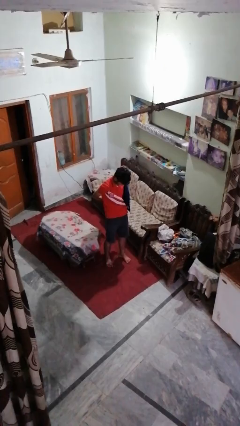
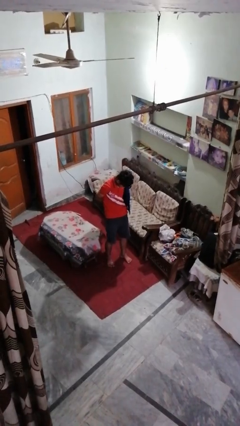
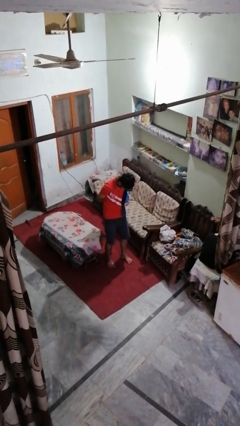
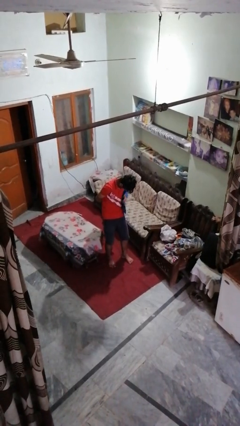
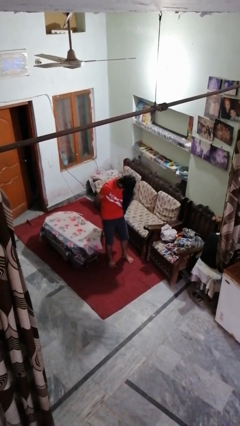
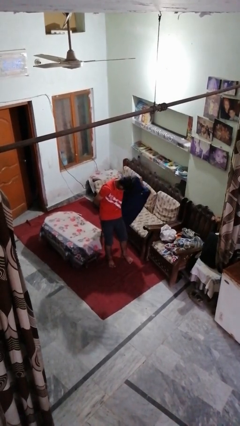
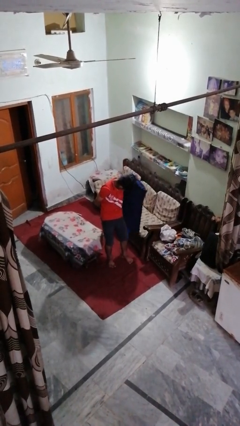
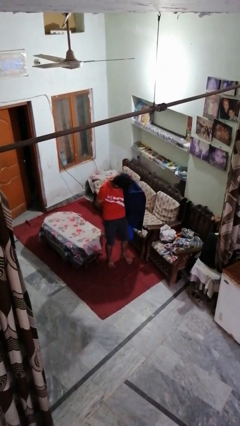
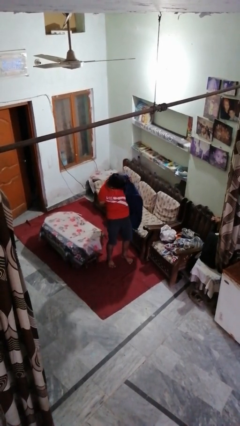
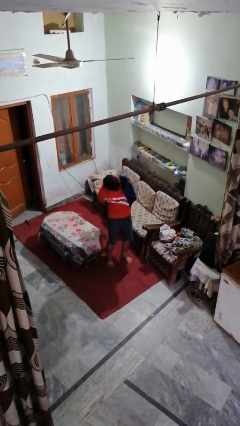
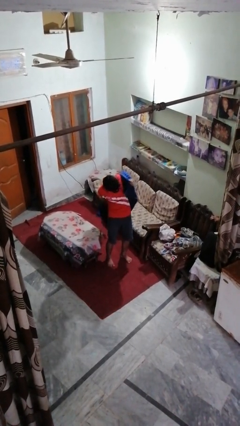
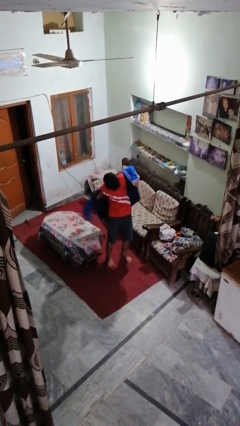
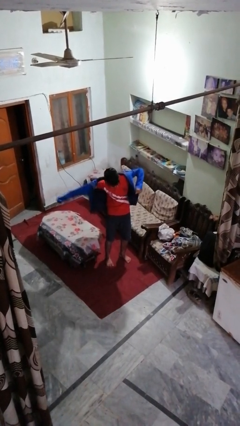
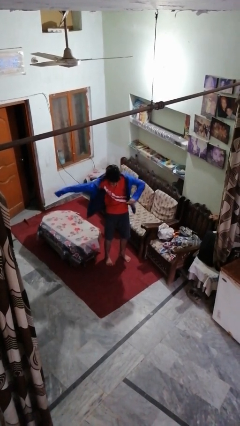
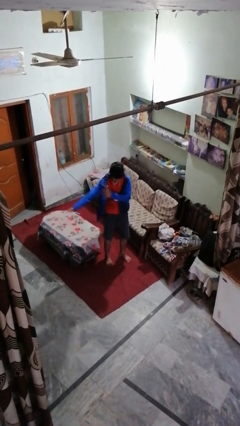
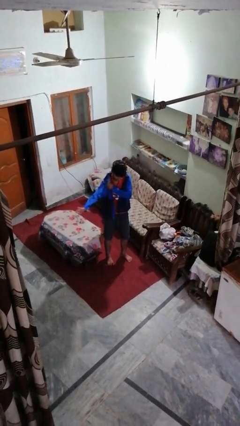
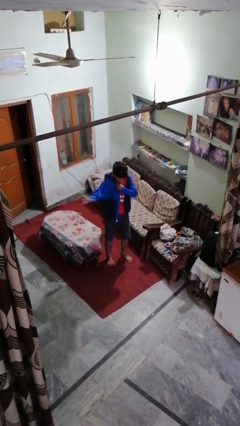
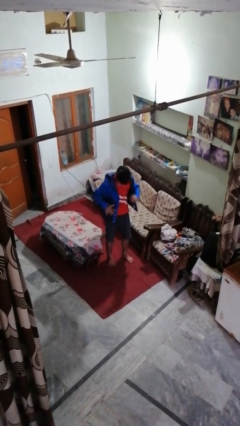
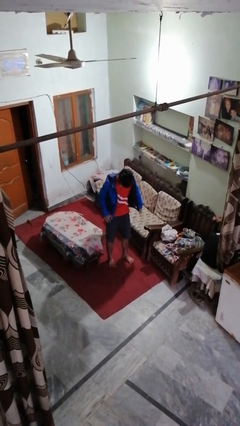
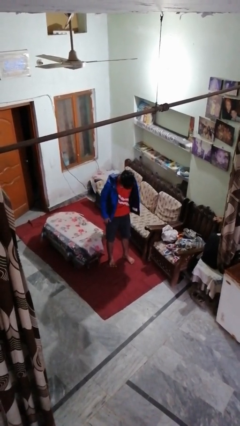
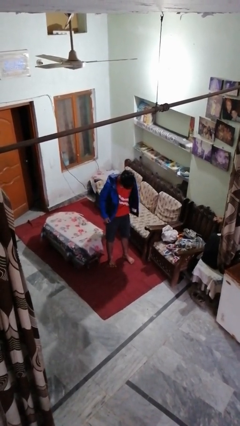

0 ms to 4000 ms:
person puts on jacket

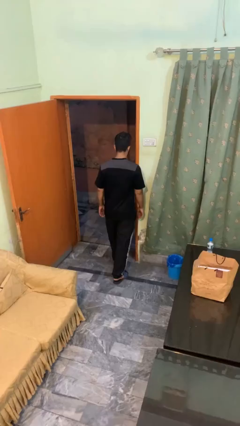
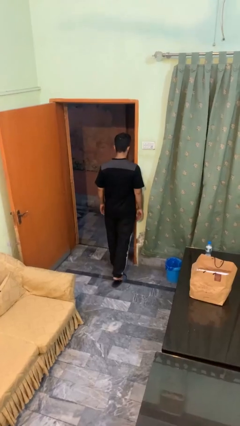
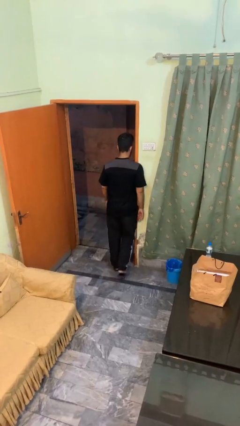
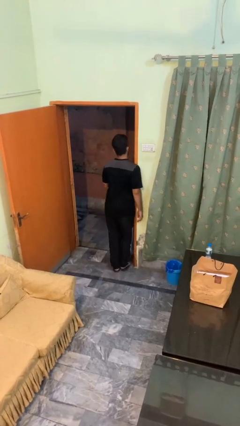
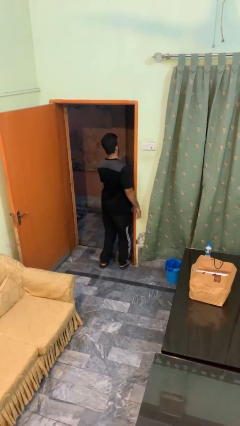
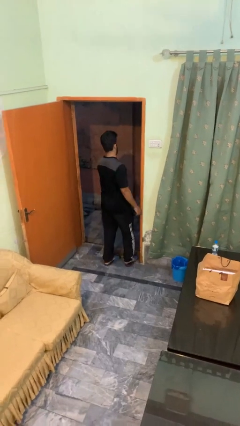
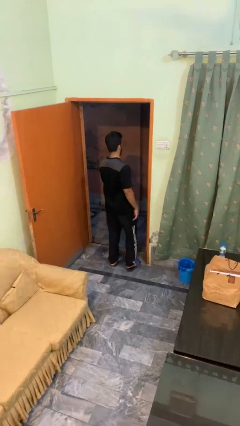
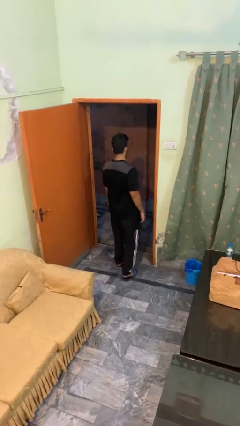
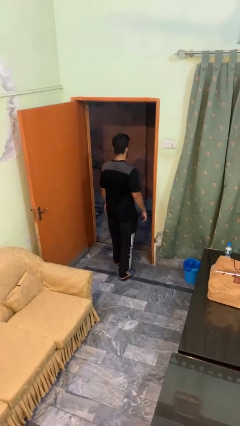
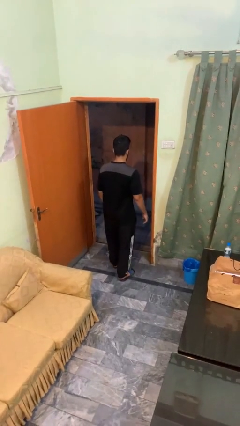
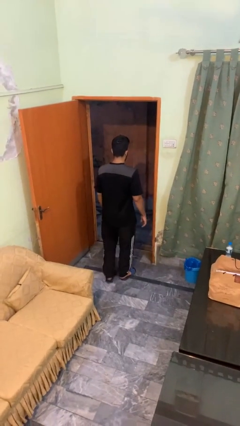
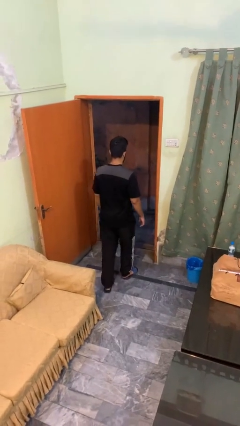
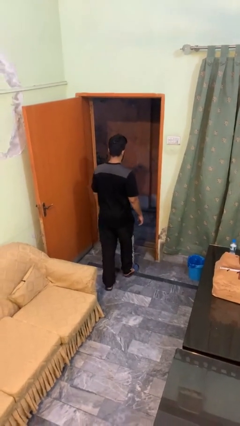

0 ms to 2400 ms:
person bumps into wall

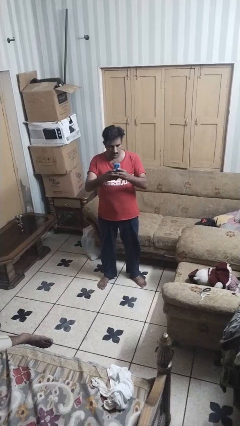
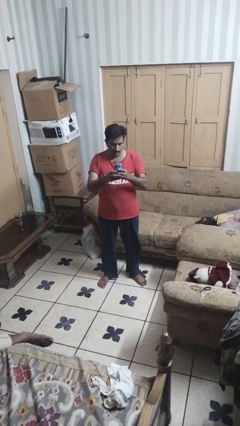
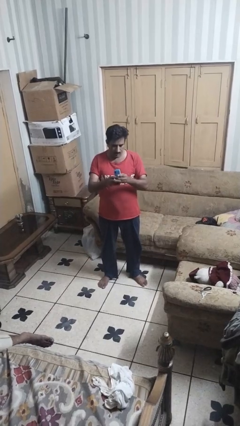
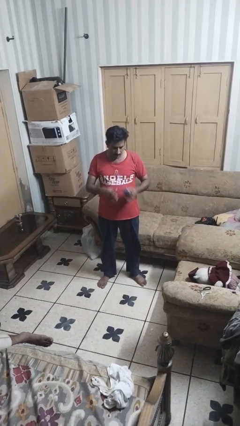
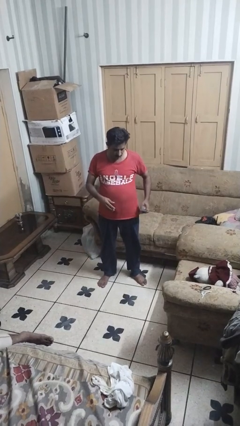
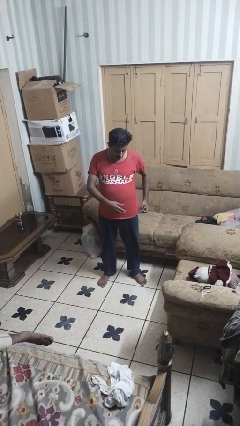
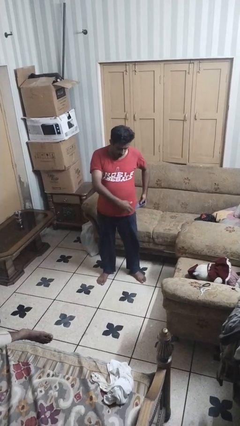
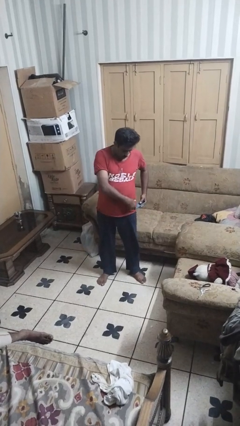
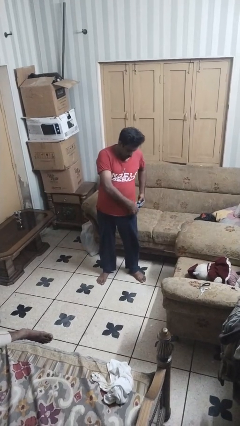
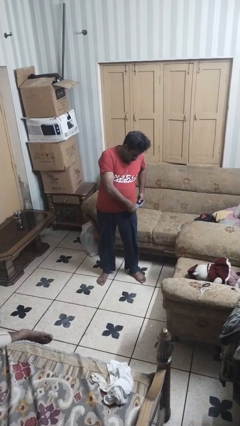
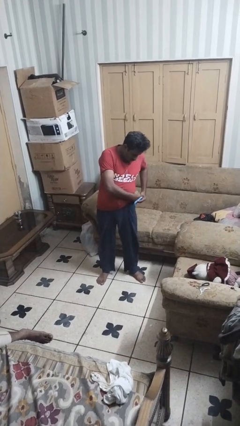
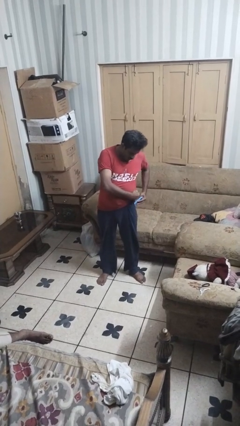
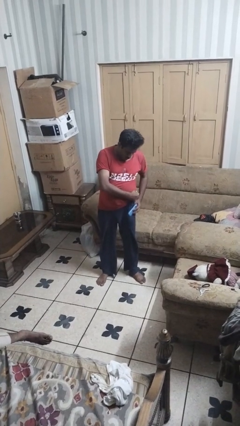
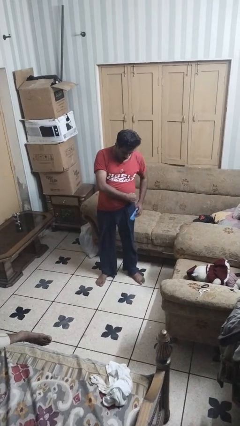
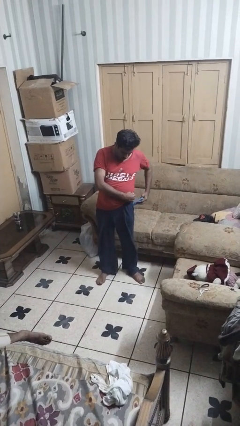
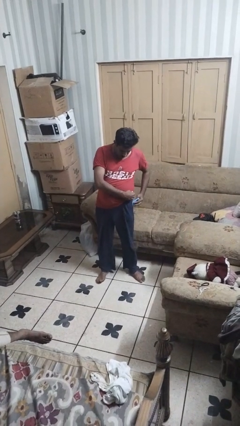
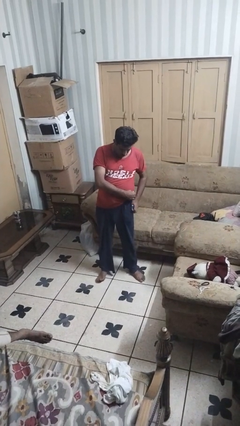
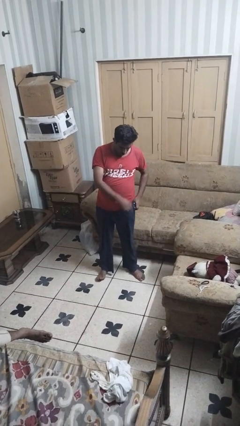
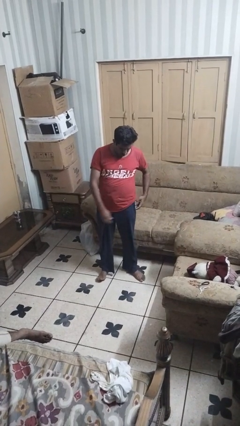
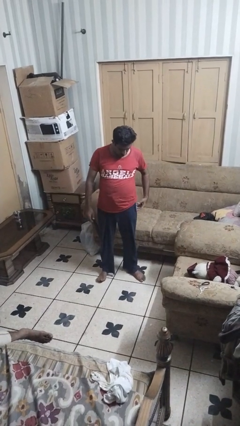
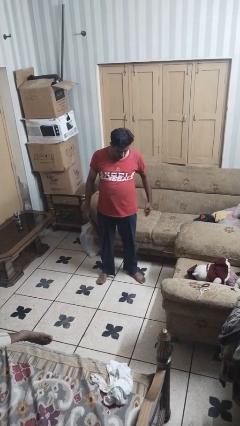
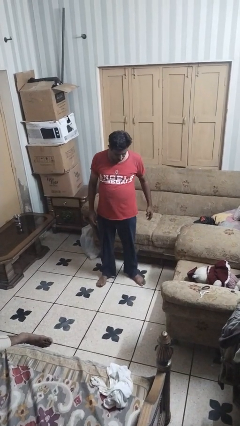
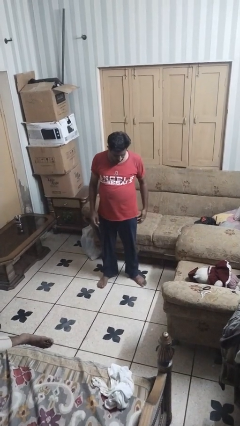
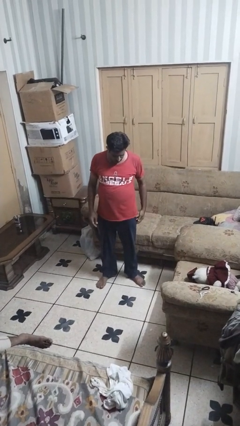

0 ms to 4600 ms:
person puts phone into pocket

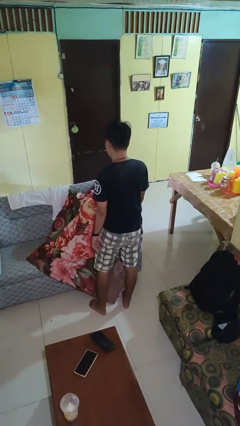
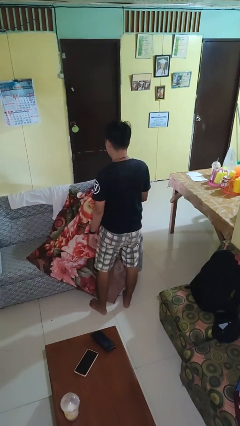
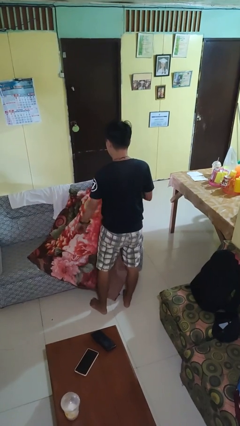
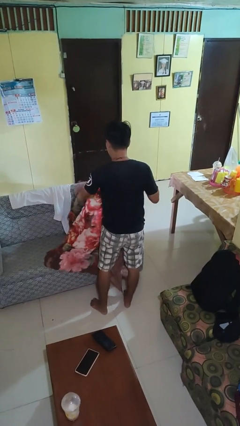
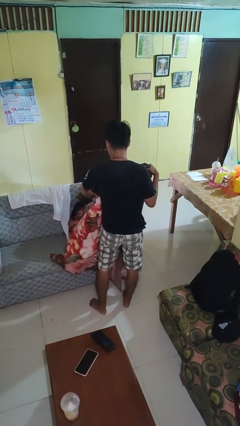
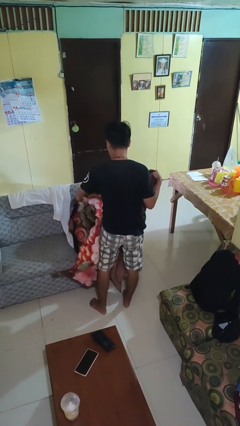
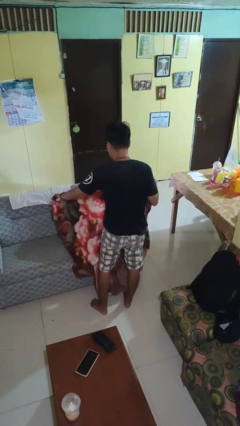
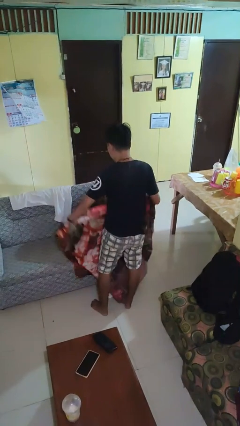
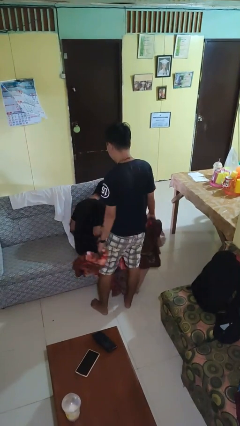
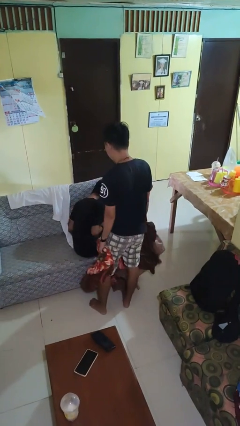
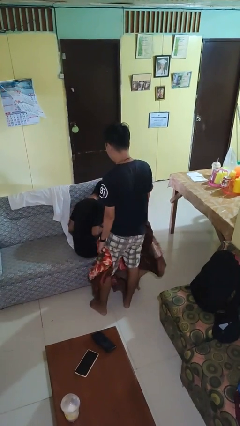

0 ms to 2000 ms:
person uncovers friend with blanket

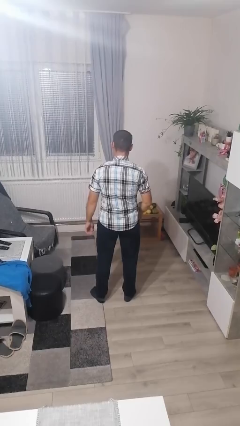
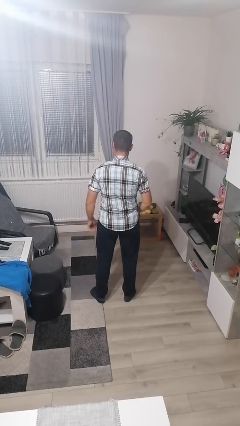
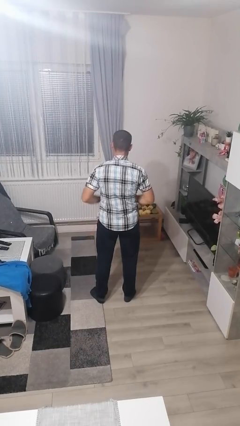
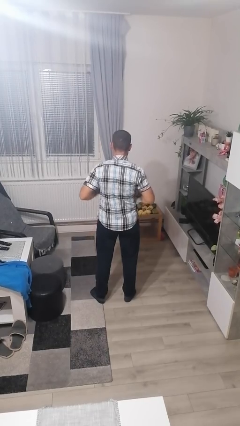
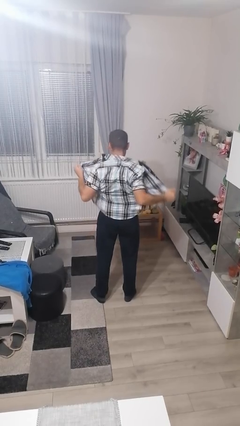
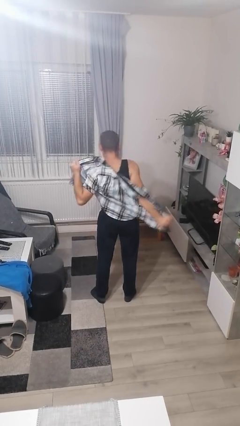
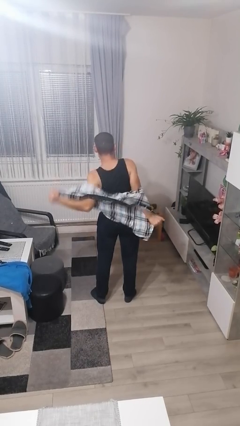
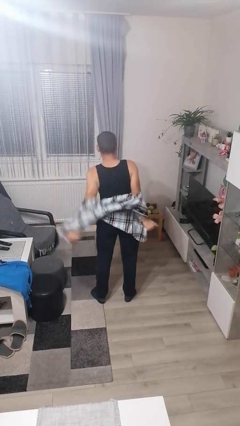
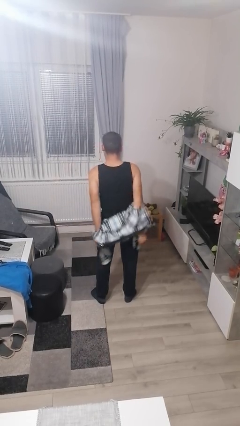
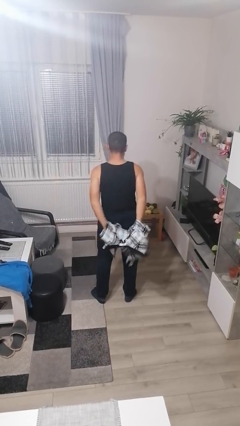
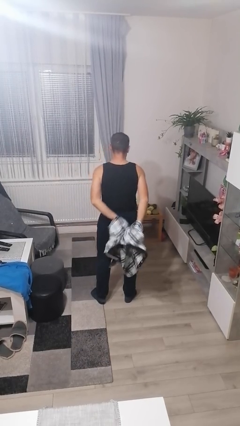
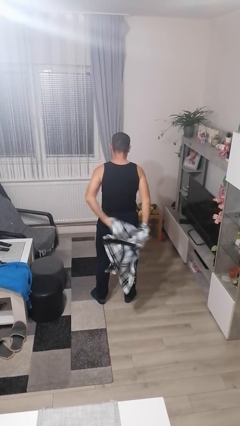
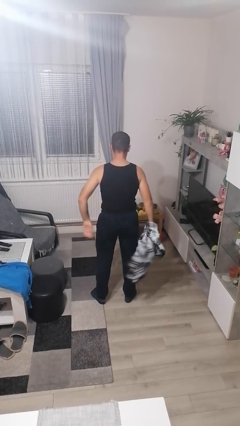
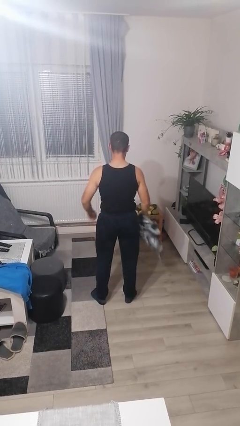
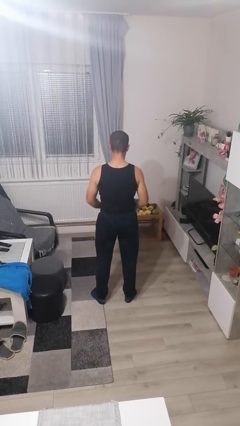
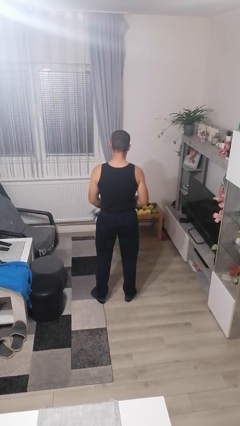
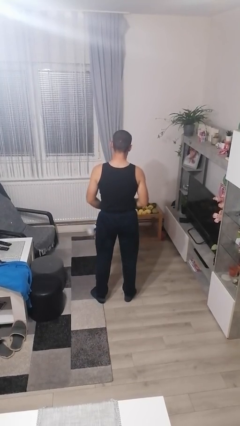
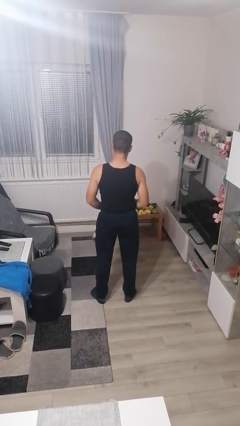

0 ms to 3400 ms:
person takes off shirt

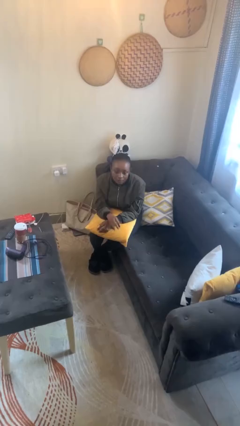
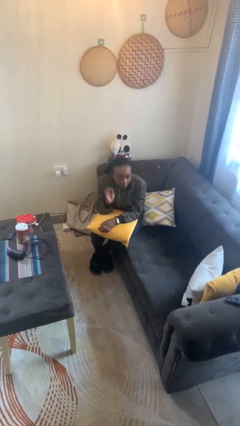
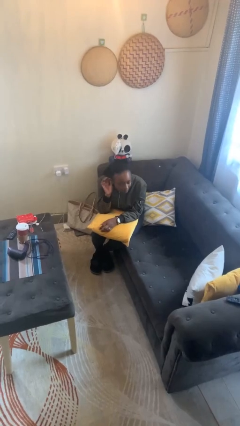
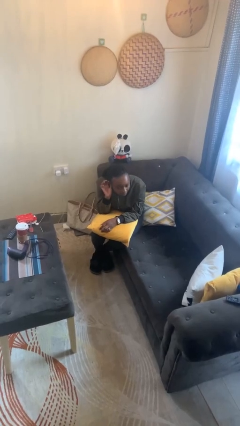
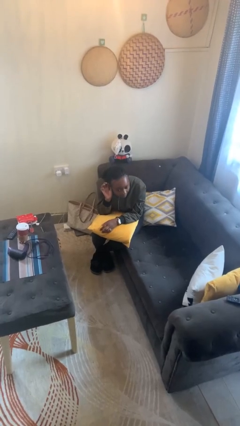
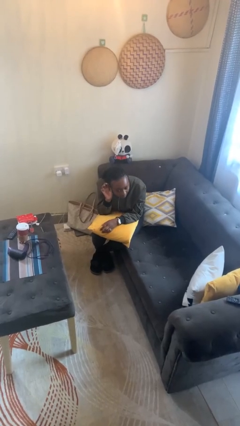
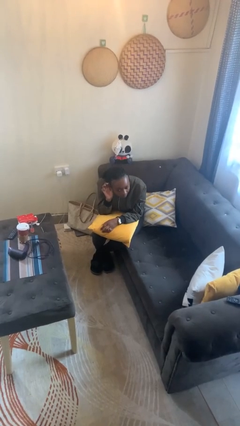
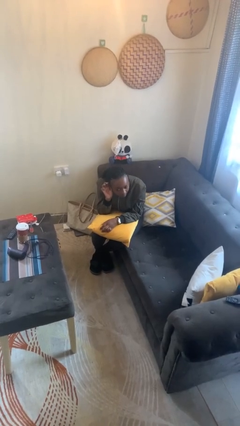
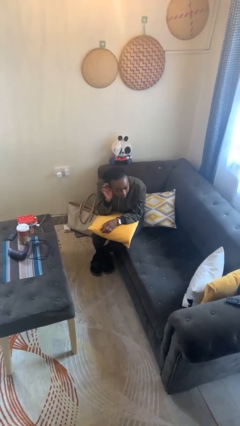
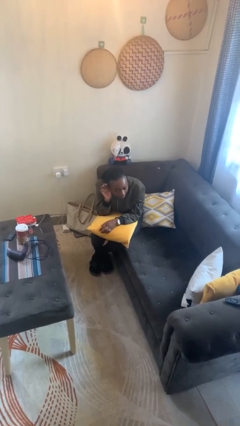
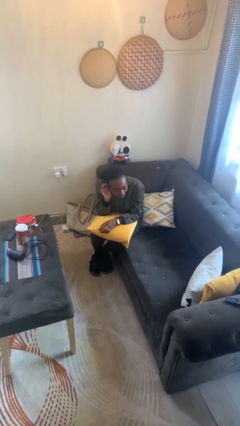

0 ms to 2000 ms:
person gestures listen closely
